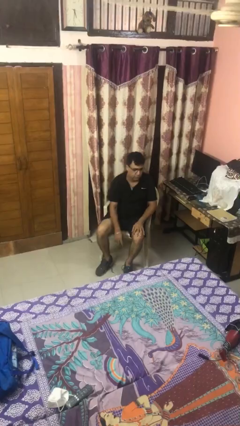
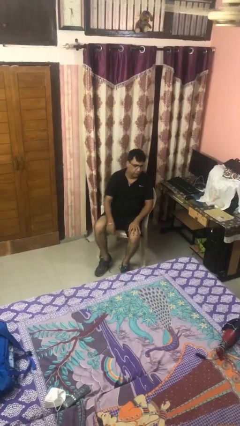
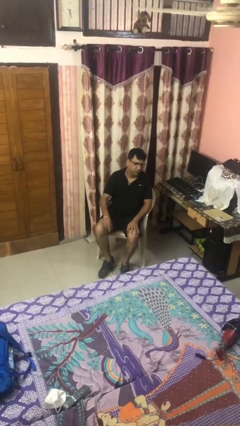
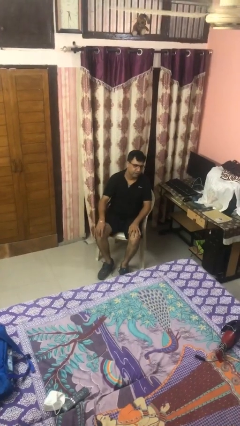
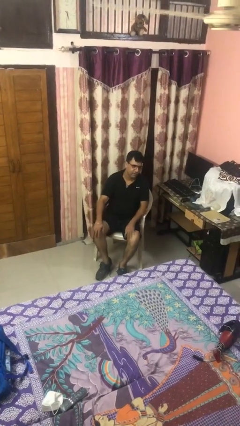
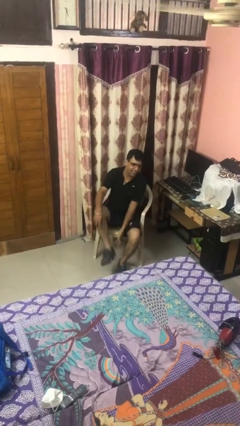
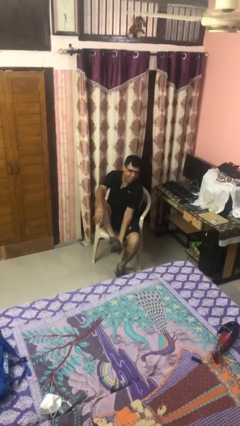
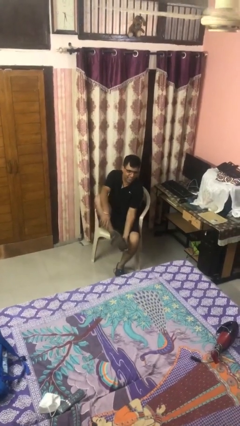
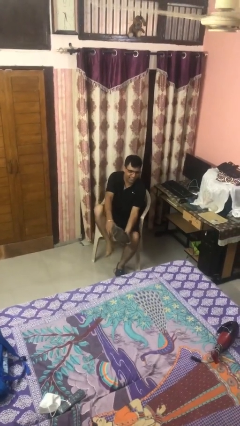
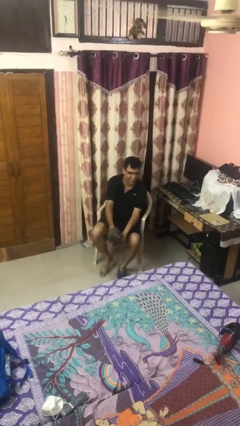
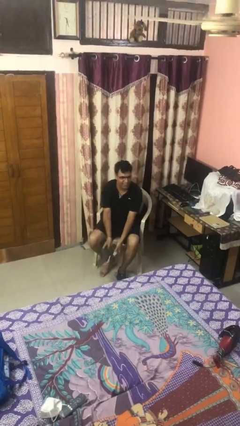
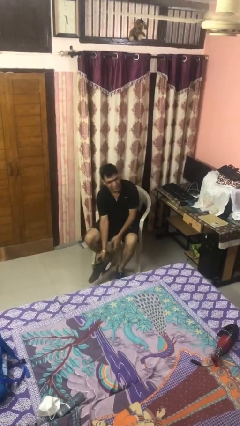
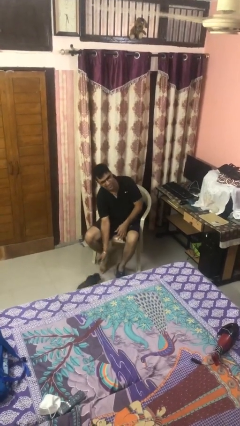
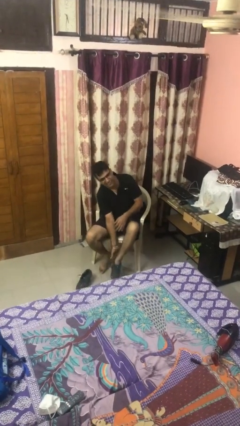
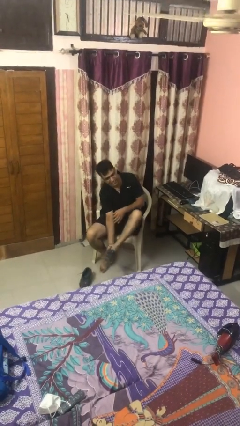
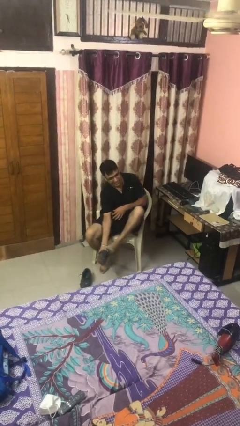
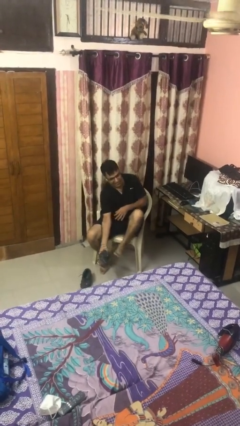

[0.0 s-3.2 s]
person takes off shoes

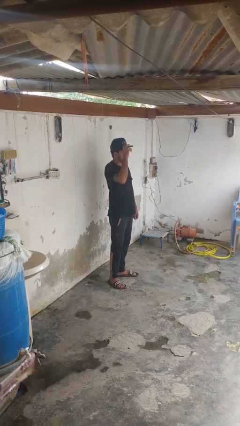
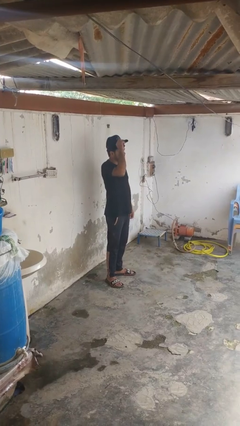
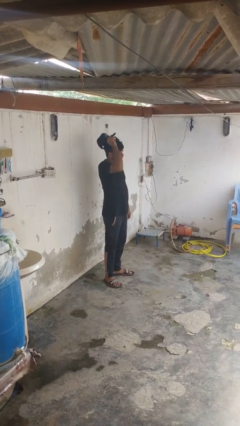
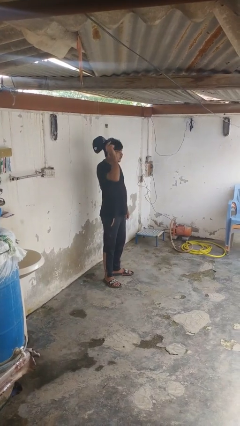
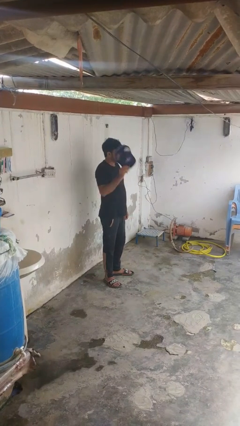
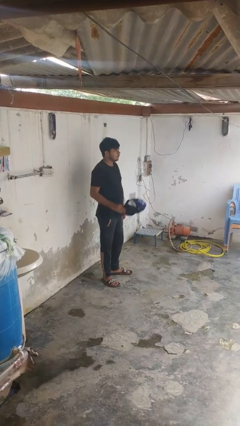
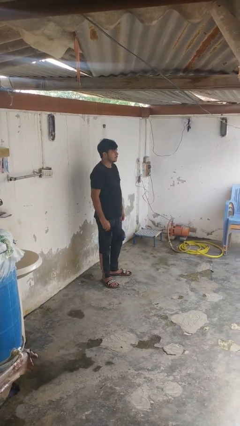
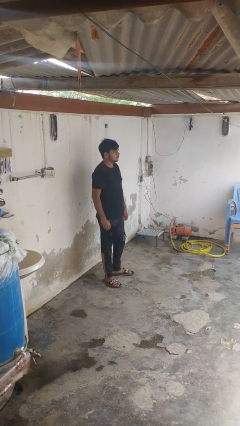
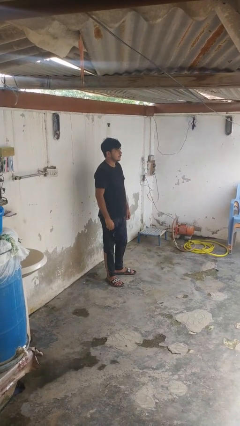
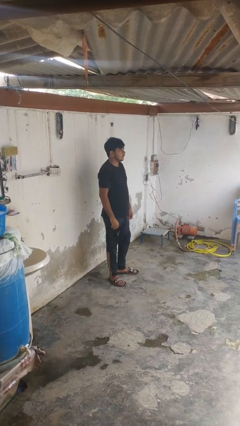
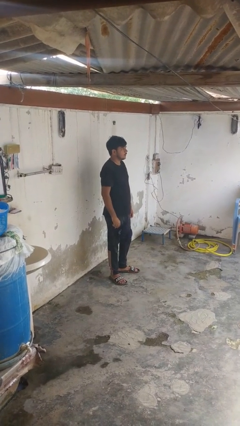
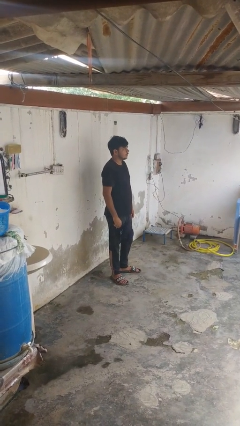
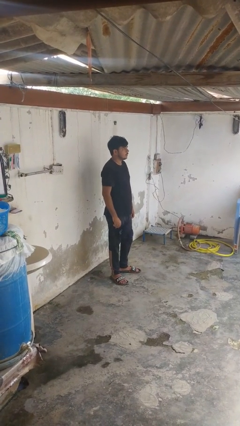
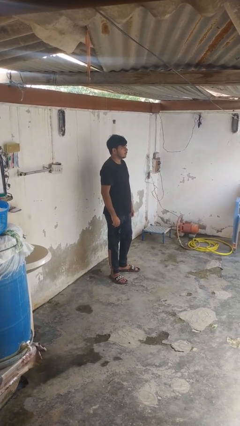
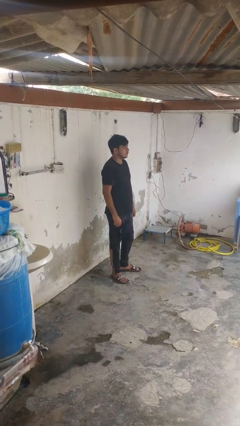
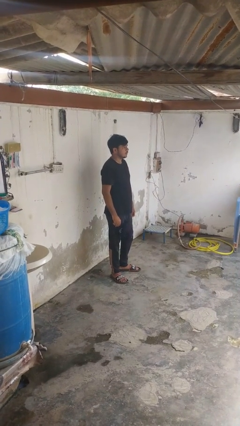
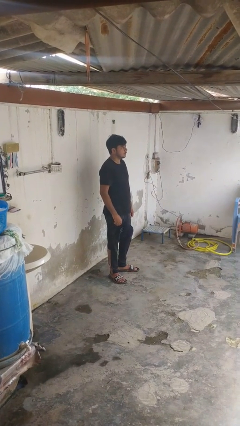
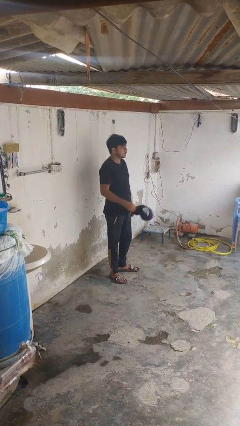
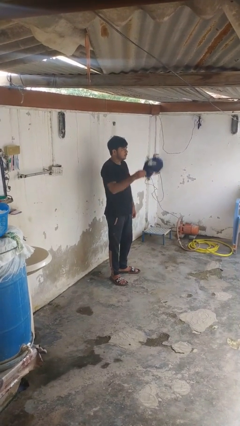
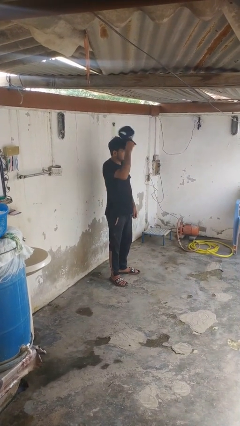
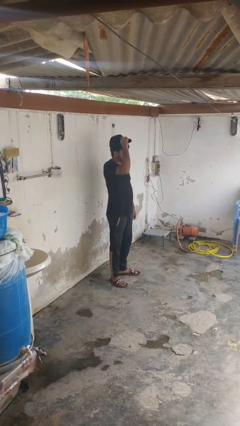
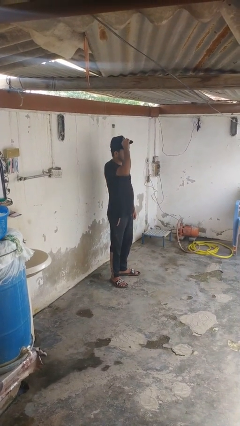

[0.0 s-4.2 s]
person takes off hat

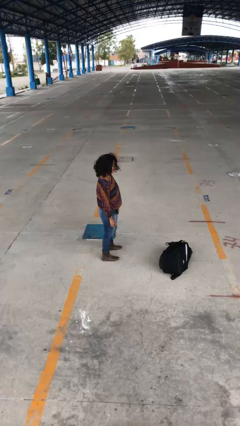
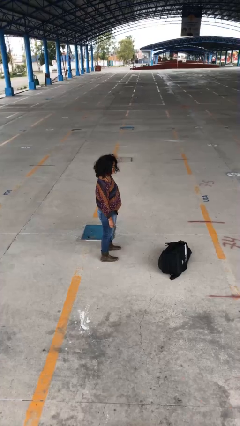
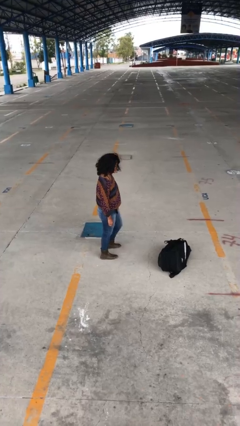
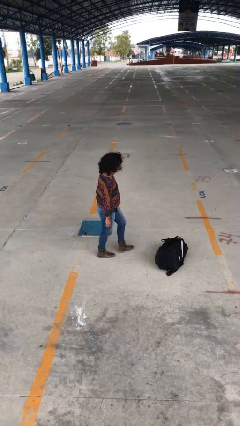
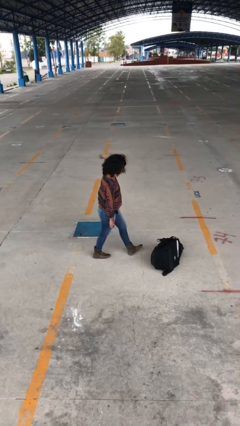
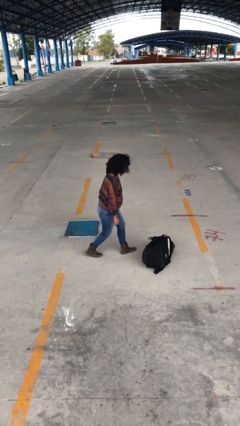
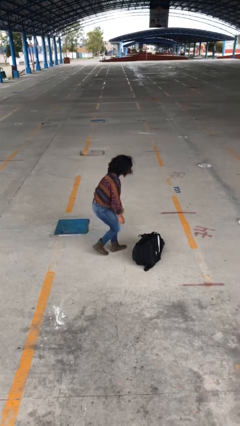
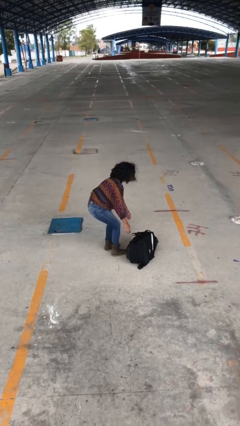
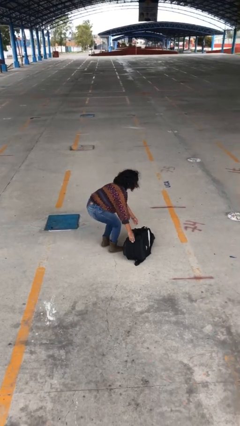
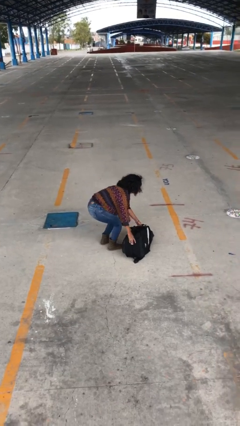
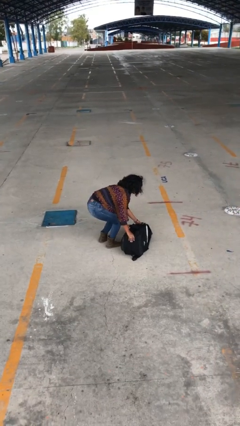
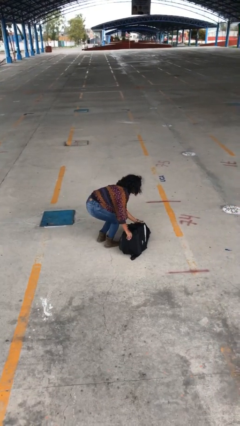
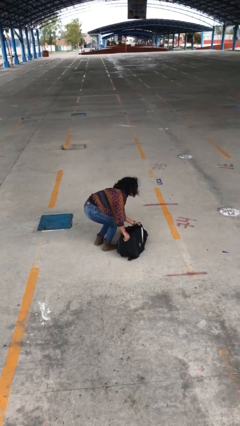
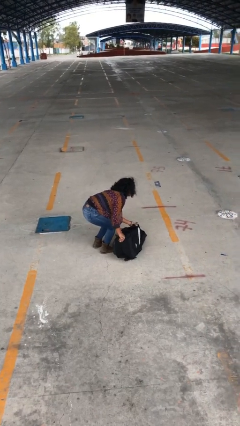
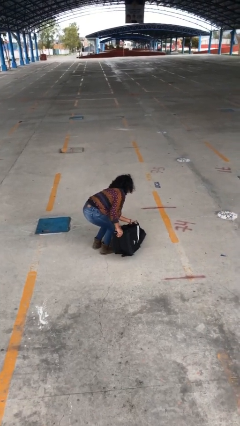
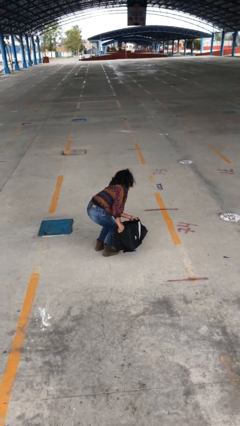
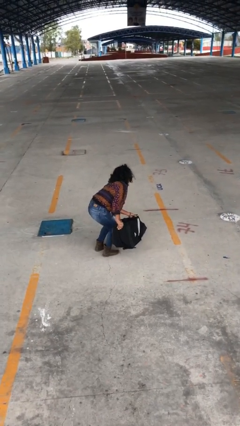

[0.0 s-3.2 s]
person picks up object from floor

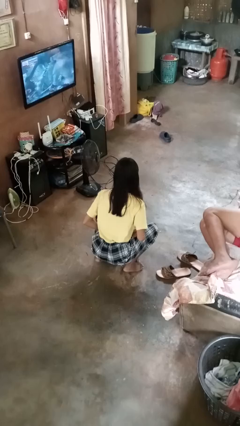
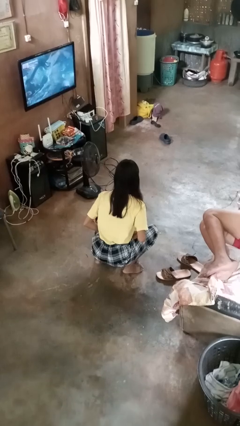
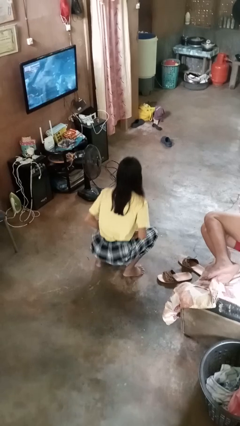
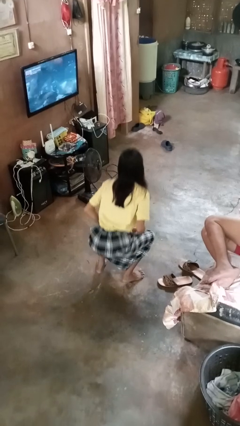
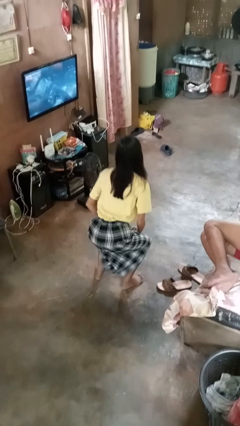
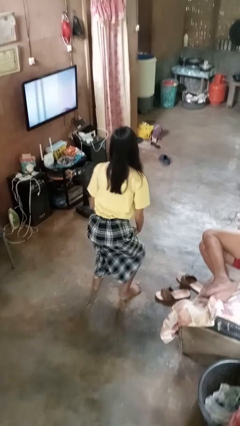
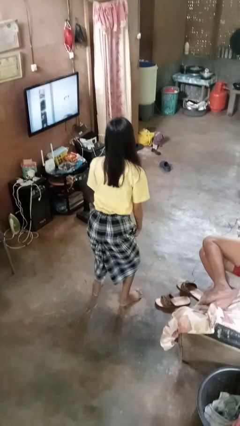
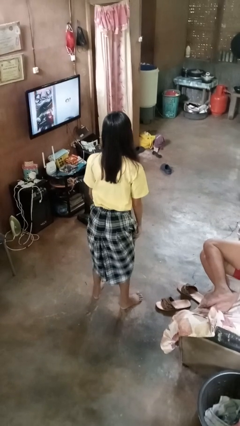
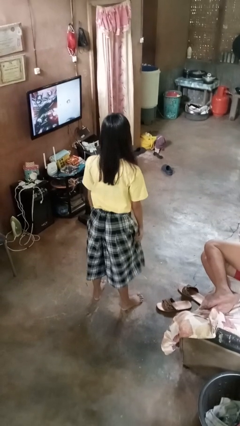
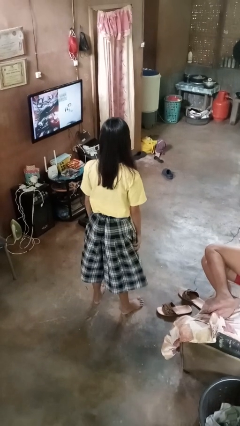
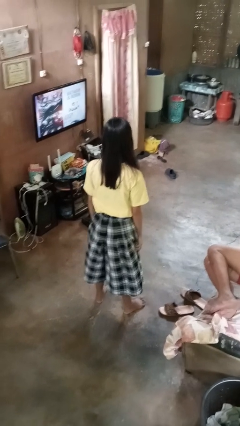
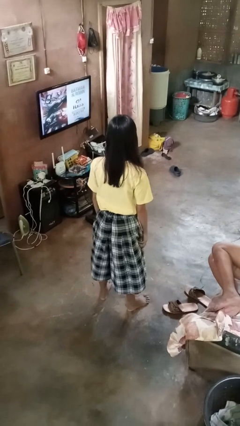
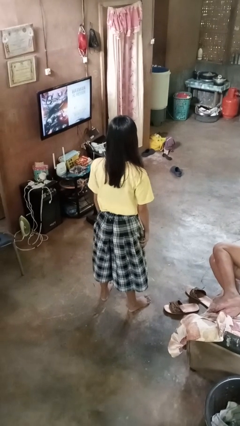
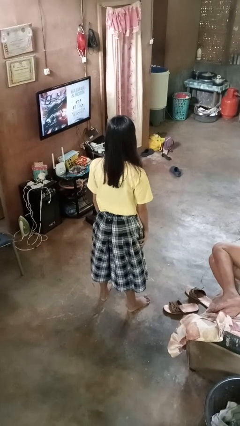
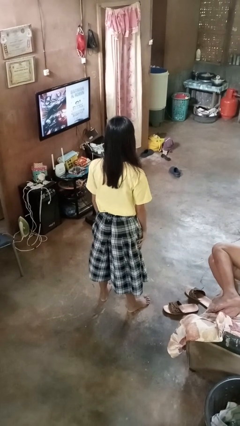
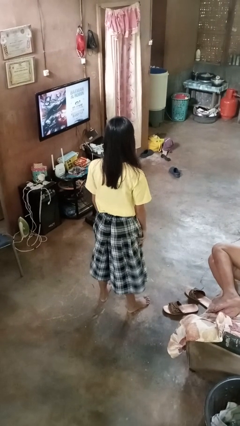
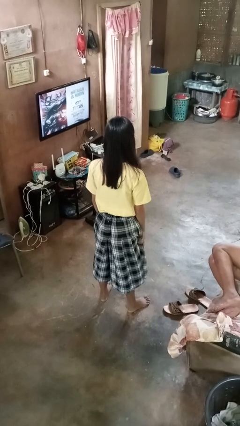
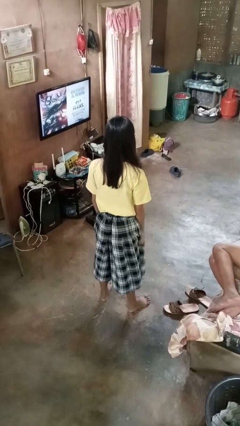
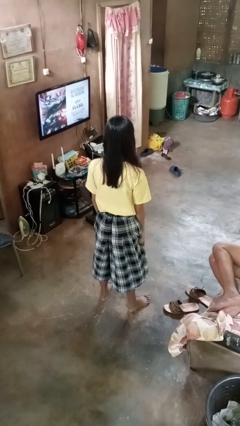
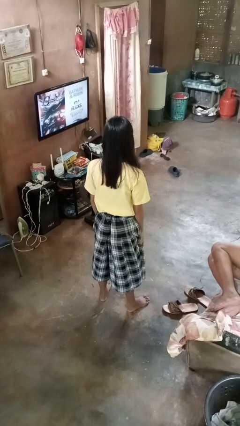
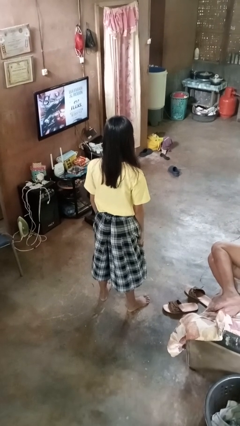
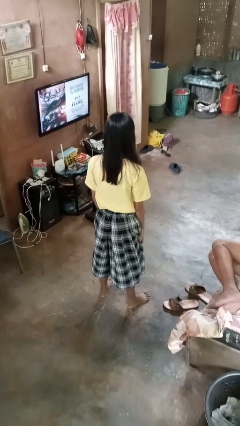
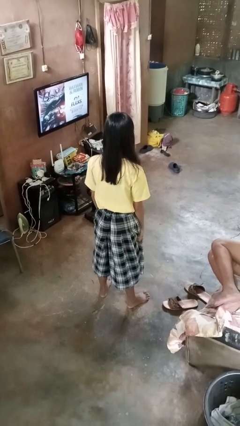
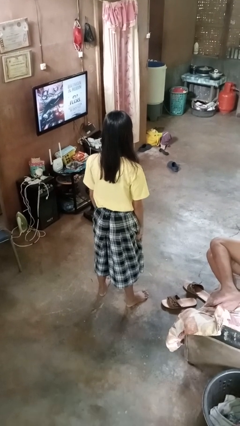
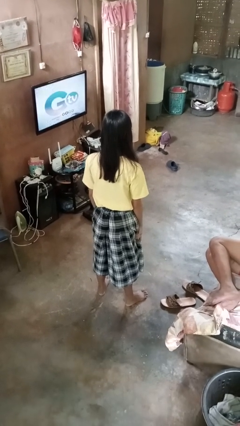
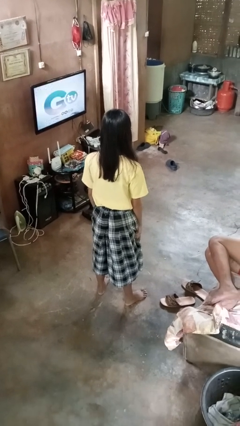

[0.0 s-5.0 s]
person stands up

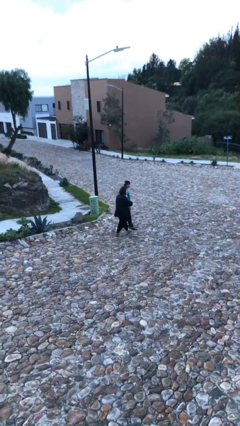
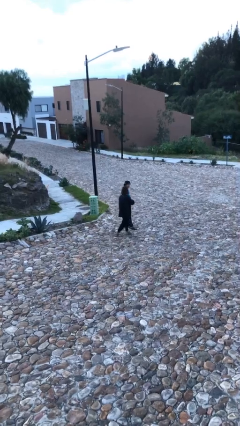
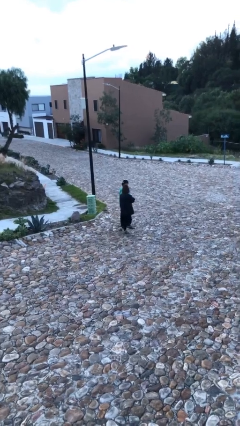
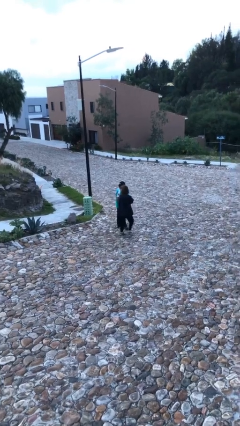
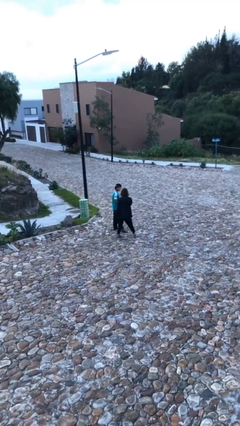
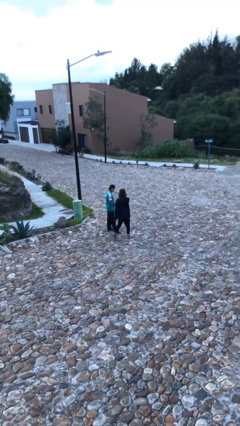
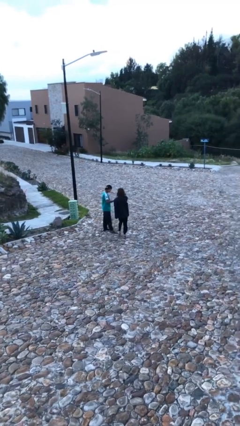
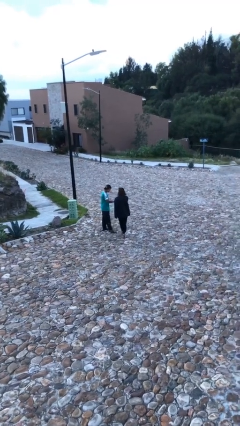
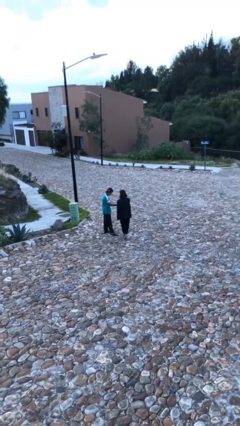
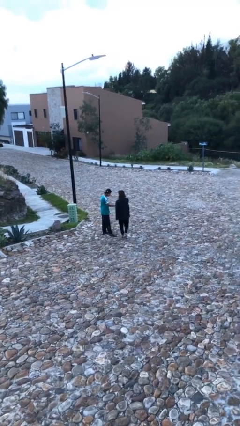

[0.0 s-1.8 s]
person shakes hand
